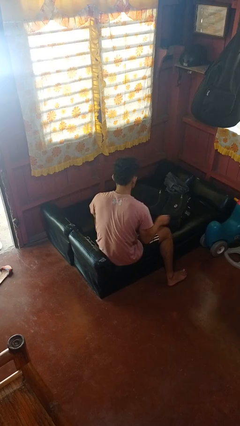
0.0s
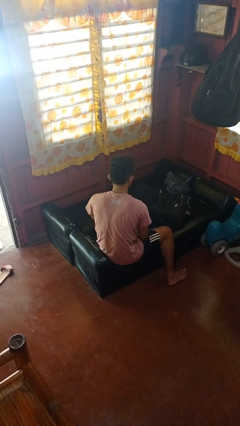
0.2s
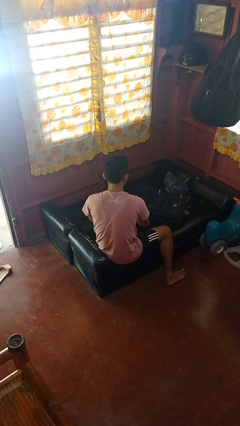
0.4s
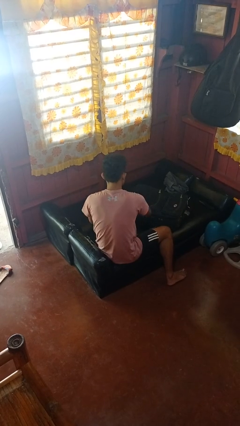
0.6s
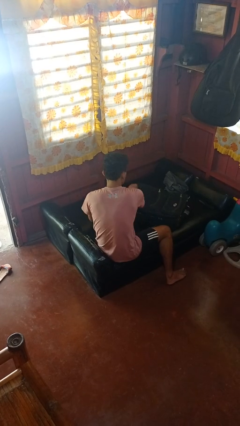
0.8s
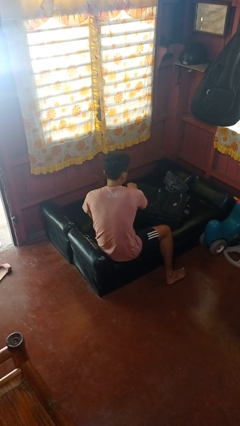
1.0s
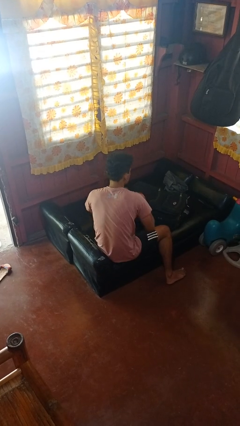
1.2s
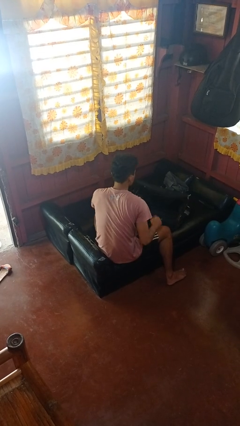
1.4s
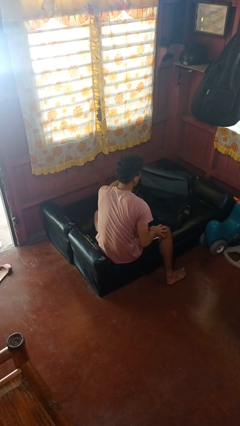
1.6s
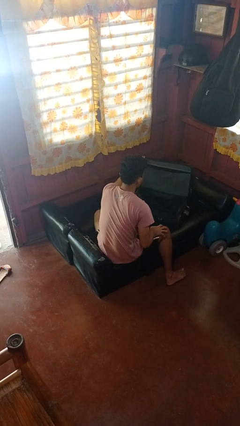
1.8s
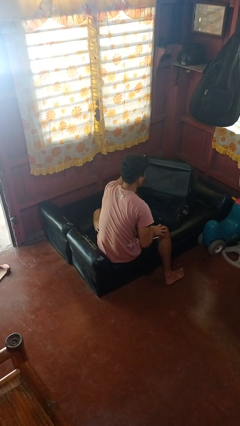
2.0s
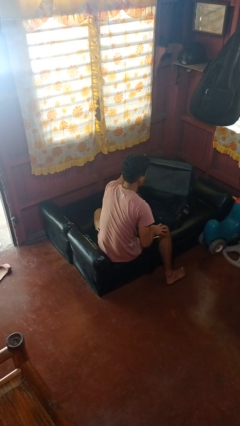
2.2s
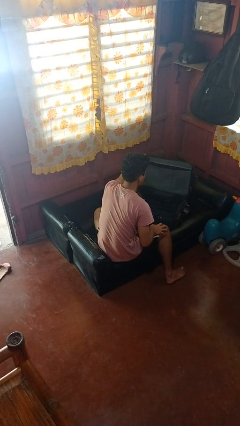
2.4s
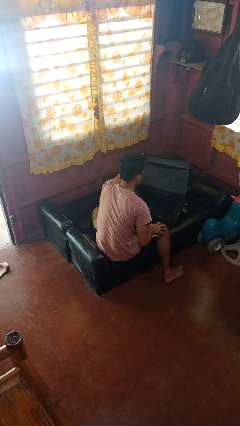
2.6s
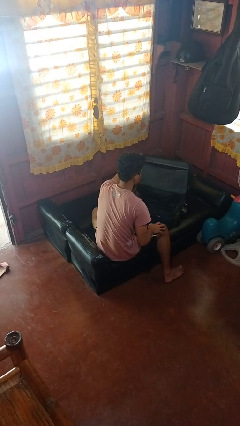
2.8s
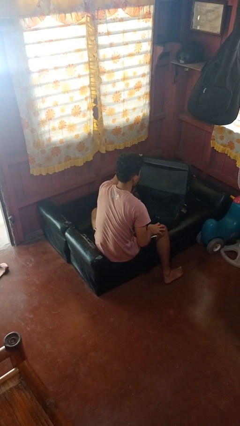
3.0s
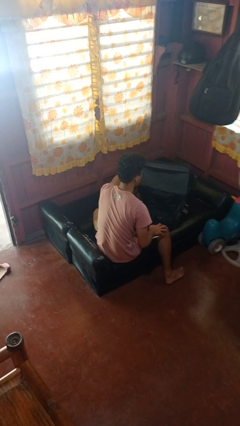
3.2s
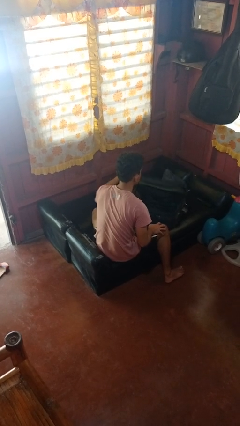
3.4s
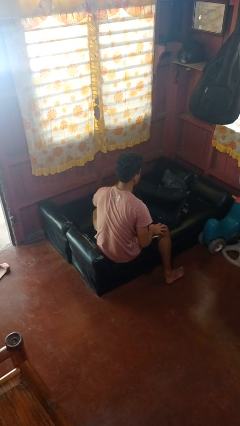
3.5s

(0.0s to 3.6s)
person opens suitcase

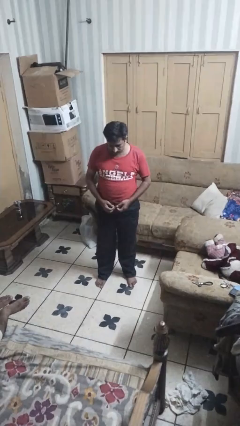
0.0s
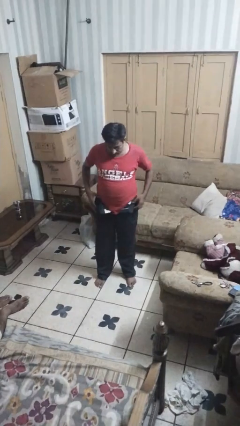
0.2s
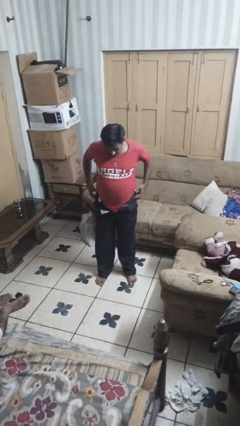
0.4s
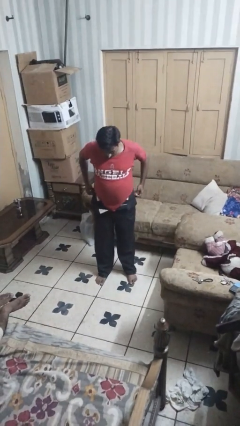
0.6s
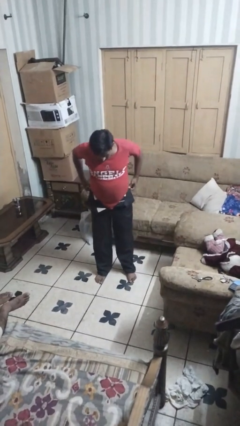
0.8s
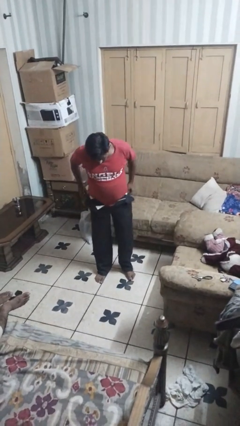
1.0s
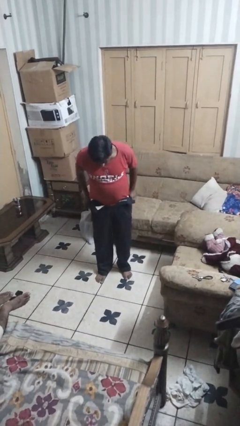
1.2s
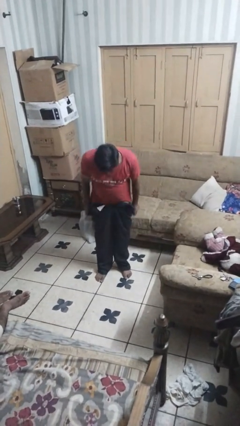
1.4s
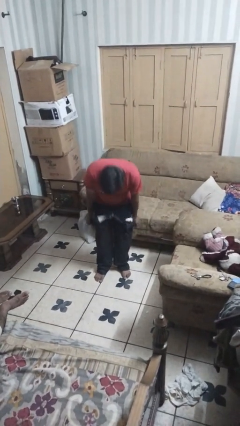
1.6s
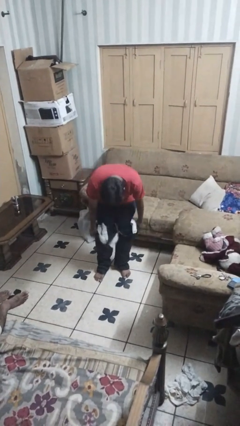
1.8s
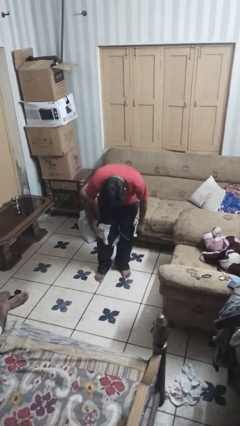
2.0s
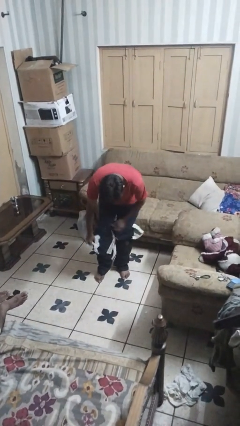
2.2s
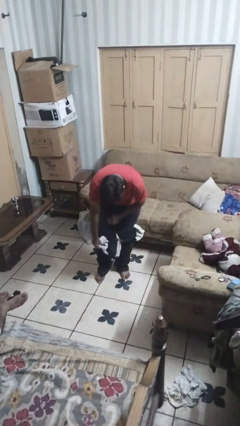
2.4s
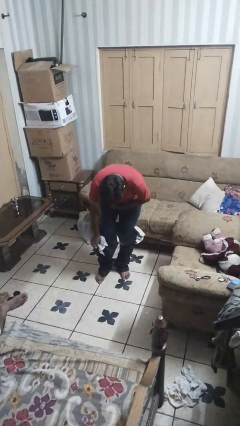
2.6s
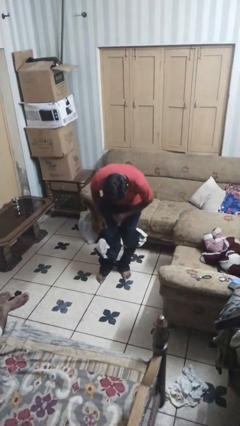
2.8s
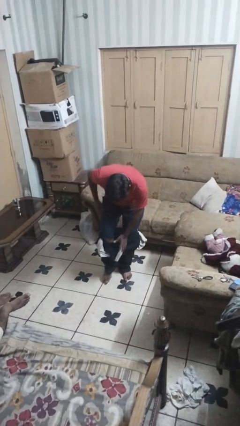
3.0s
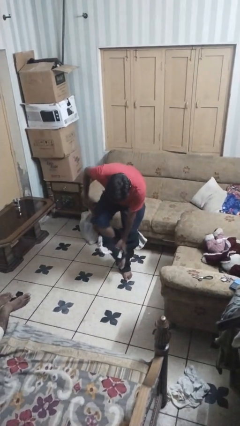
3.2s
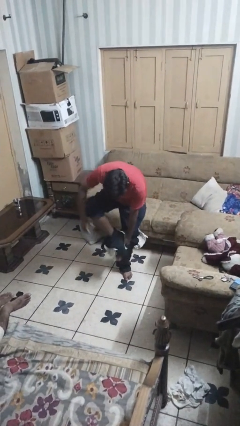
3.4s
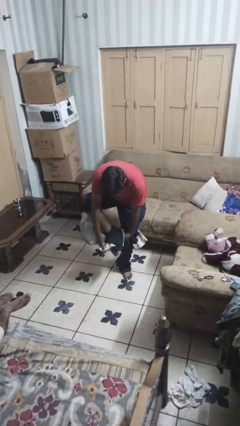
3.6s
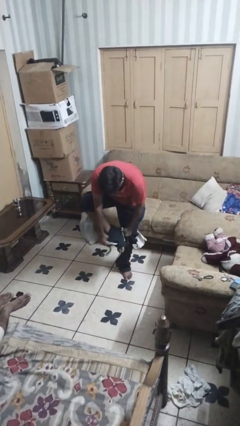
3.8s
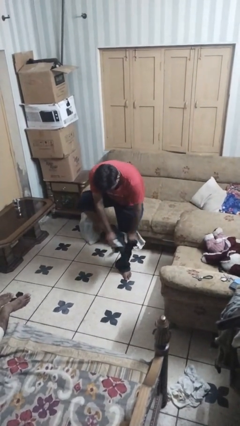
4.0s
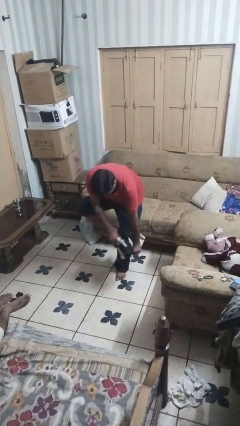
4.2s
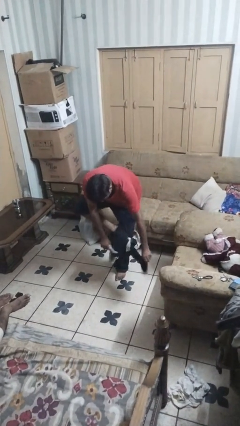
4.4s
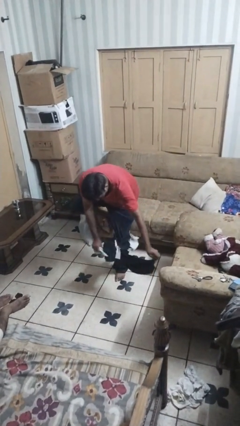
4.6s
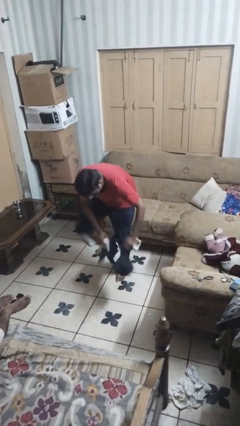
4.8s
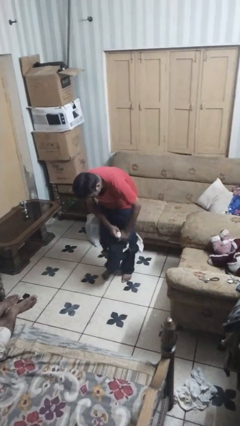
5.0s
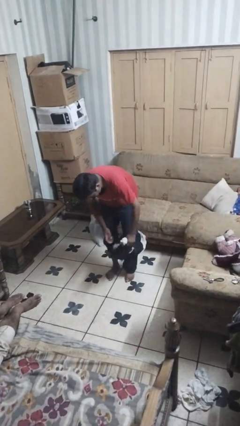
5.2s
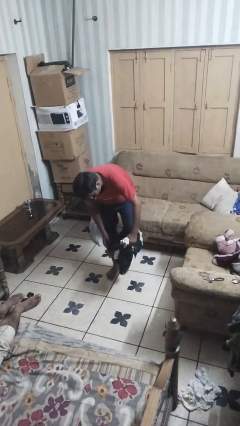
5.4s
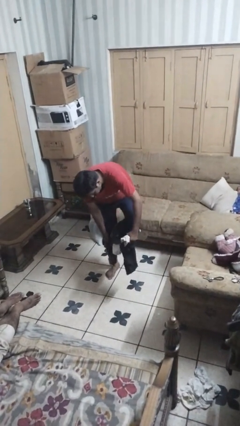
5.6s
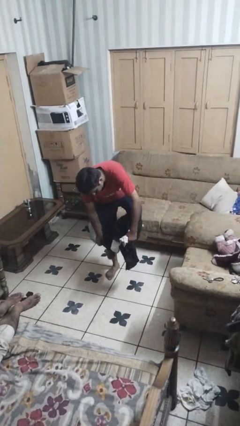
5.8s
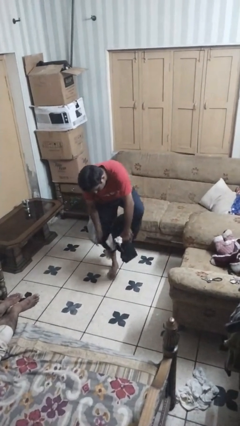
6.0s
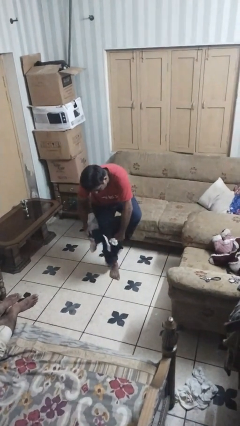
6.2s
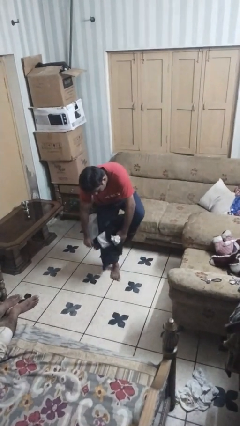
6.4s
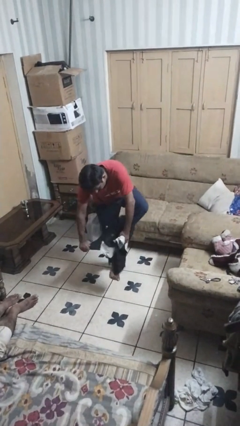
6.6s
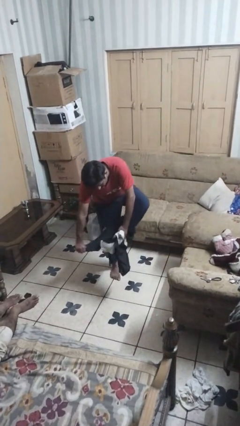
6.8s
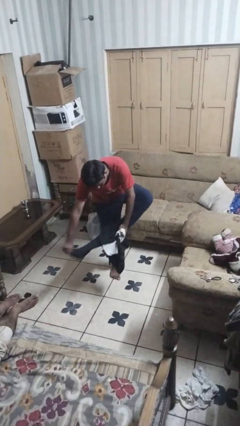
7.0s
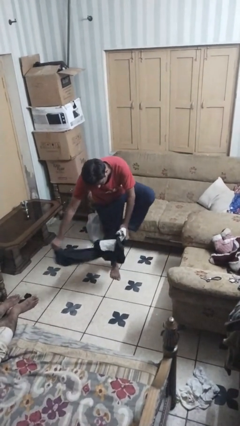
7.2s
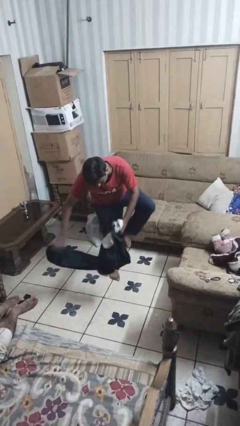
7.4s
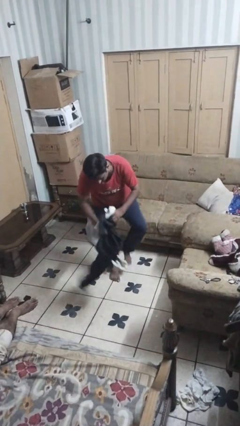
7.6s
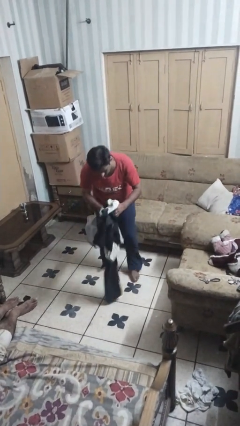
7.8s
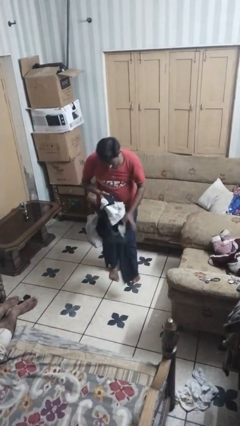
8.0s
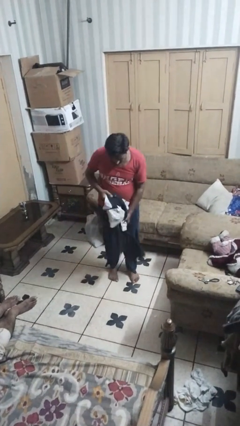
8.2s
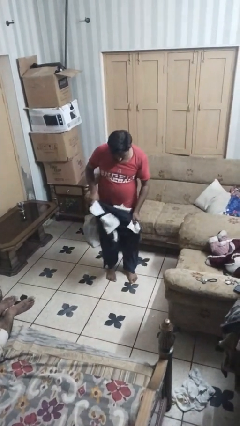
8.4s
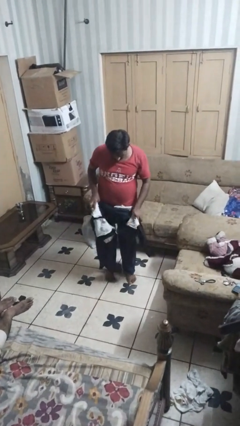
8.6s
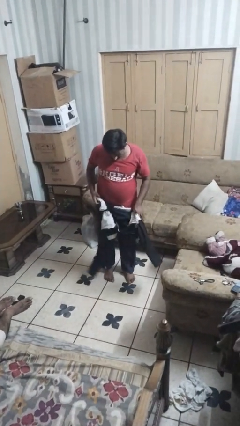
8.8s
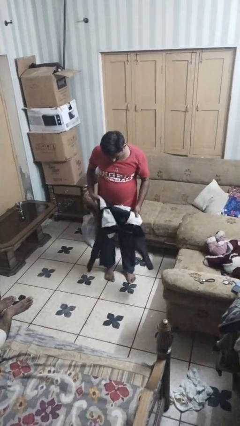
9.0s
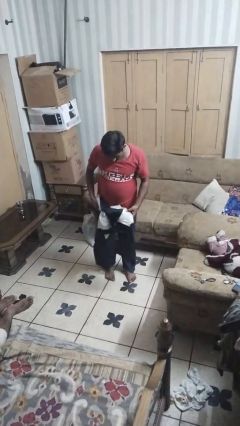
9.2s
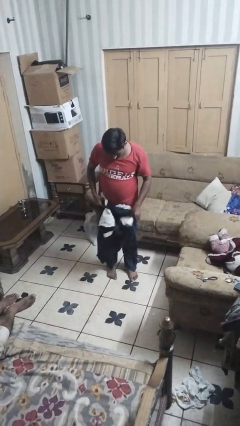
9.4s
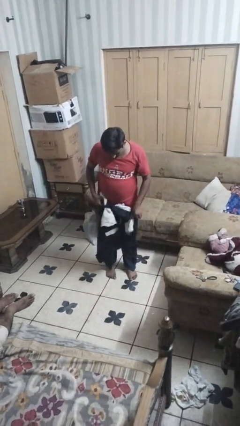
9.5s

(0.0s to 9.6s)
person takes off pants

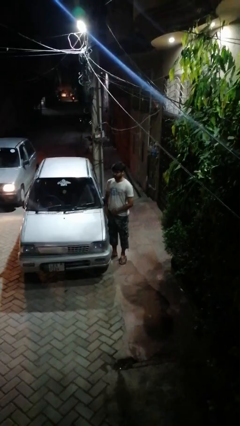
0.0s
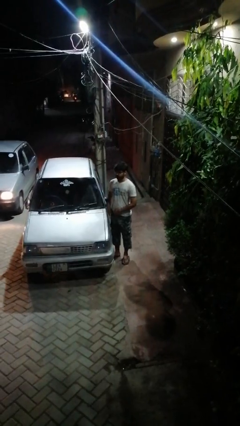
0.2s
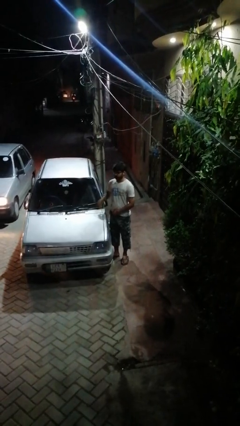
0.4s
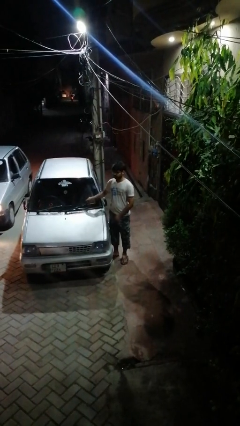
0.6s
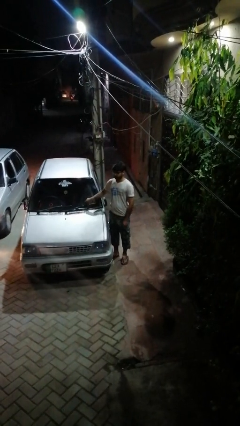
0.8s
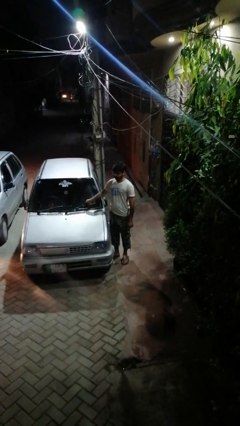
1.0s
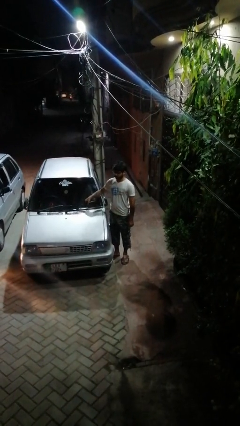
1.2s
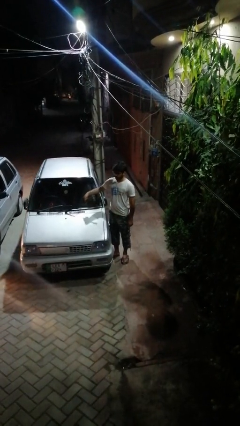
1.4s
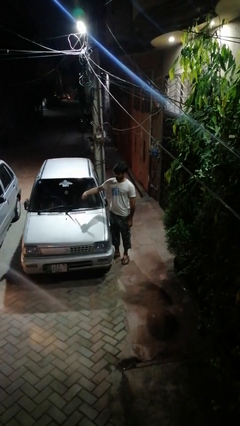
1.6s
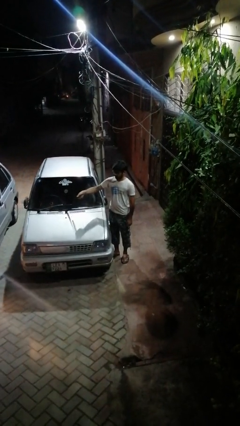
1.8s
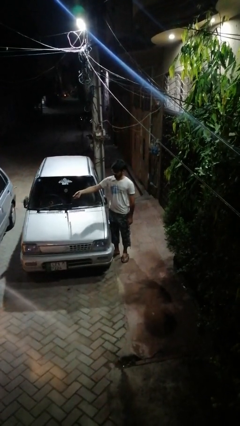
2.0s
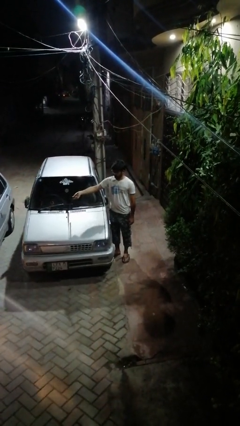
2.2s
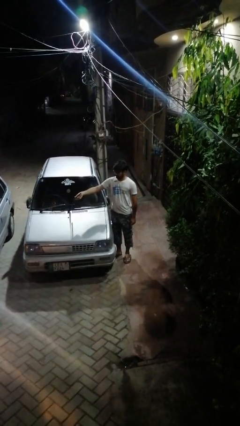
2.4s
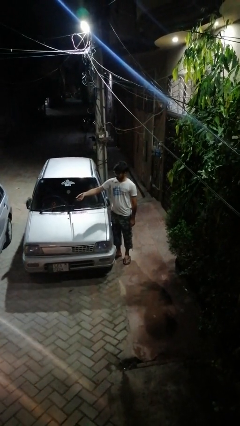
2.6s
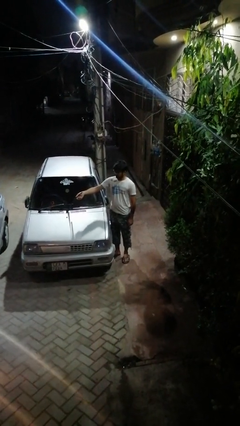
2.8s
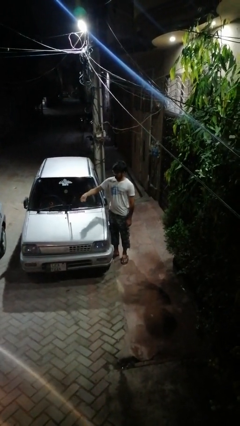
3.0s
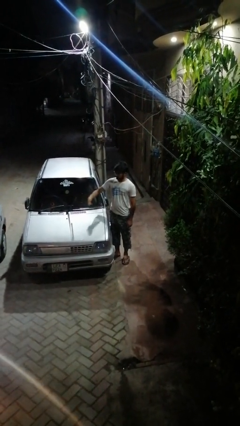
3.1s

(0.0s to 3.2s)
person flips up car wipers

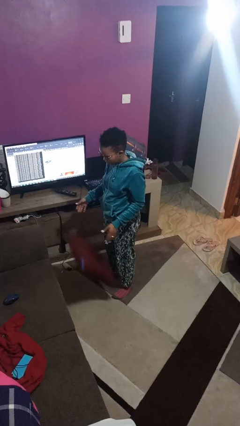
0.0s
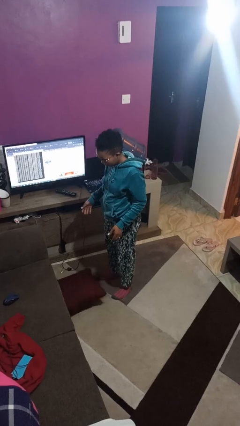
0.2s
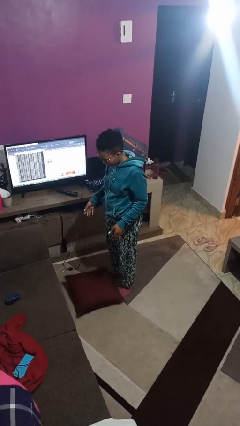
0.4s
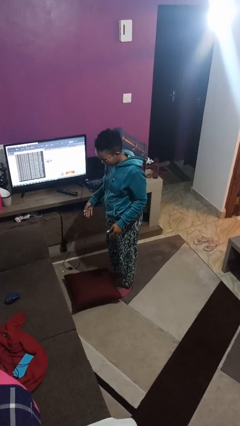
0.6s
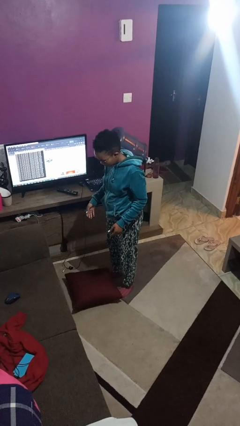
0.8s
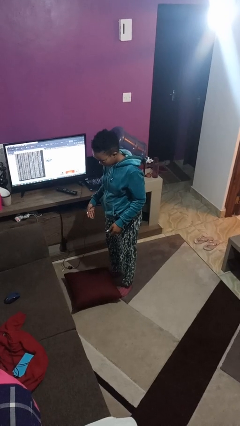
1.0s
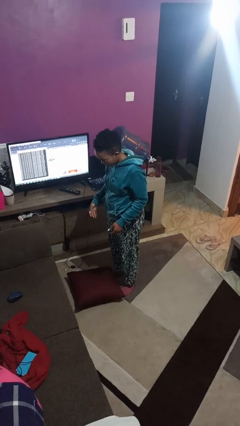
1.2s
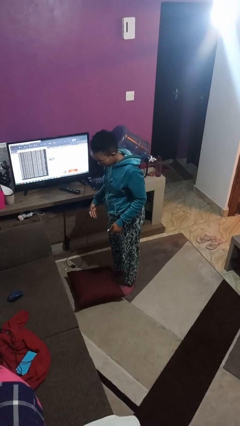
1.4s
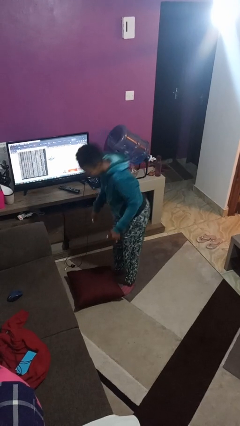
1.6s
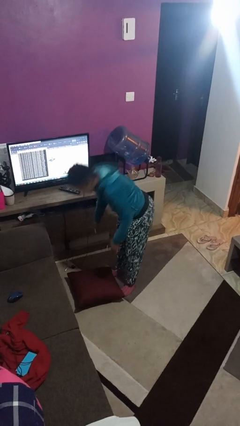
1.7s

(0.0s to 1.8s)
person throws object to ground
